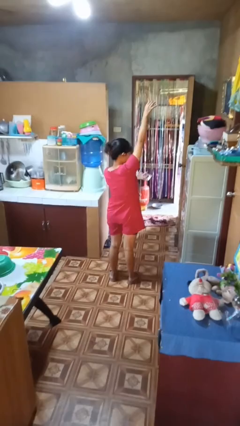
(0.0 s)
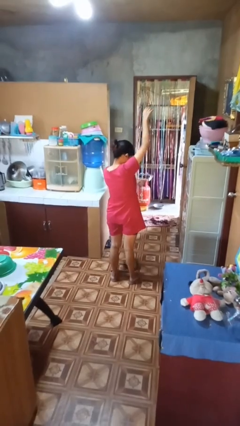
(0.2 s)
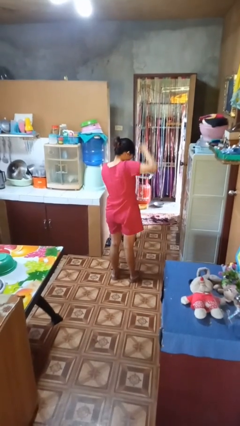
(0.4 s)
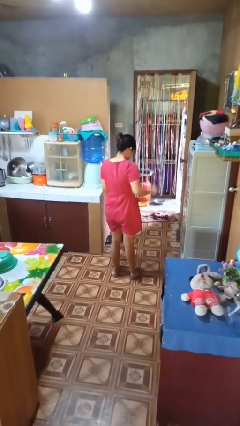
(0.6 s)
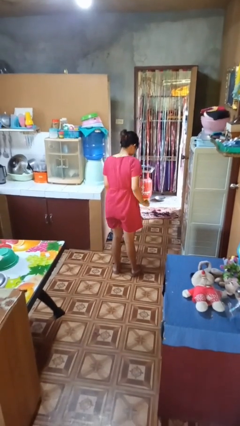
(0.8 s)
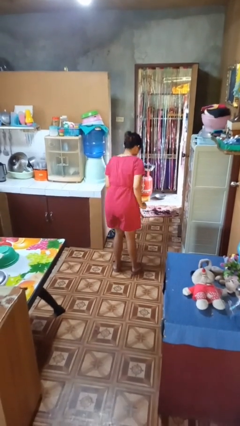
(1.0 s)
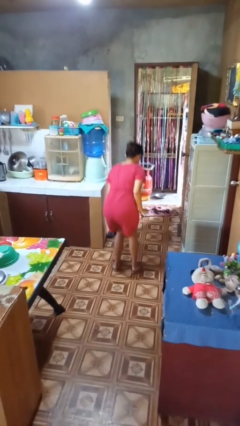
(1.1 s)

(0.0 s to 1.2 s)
person catches dropped object

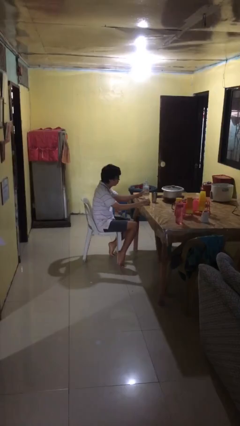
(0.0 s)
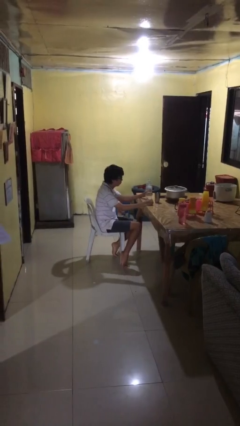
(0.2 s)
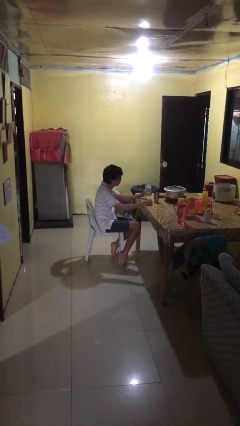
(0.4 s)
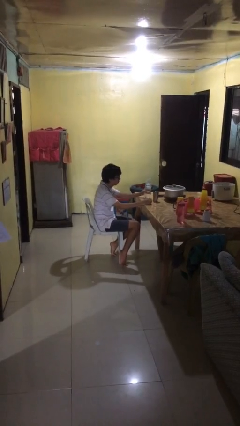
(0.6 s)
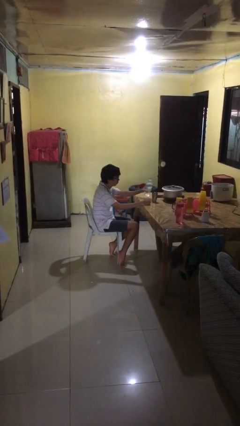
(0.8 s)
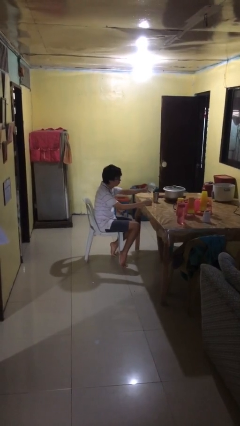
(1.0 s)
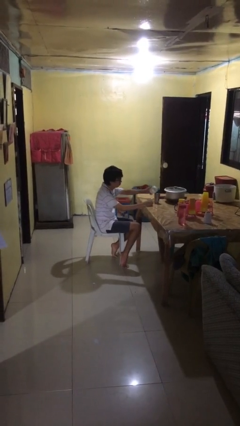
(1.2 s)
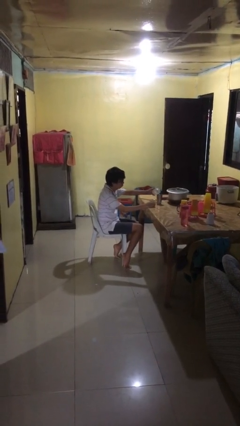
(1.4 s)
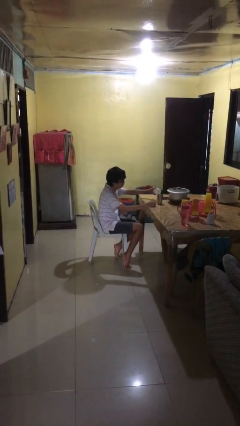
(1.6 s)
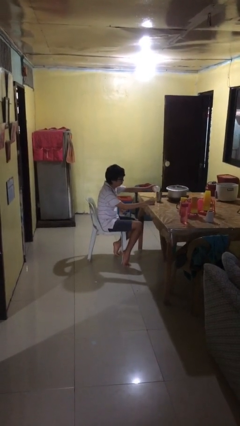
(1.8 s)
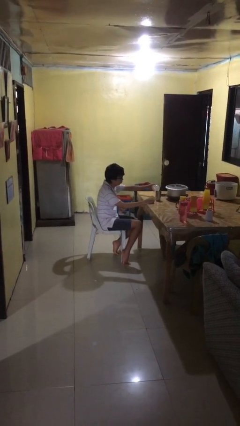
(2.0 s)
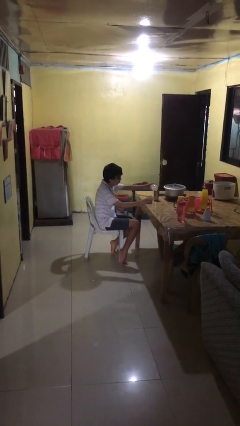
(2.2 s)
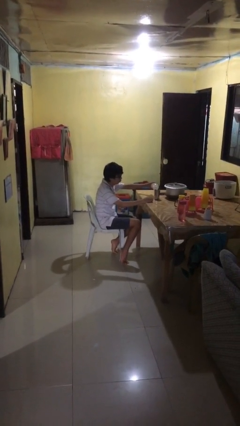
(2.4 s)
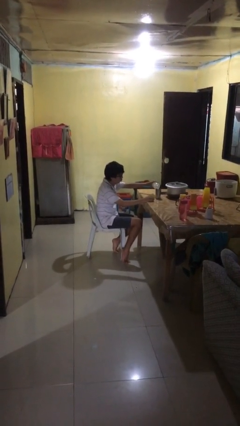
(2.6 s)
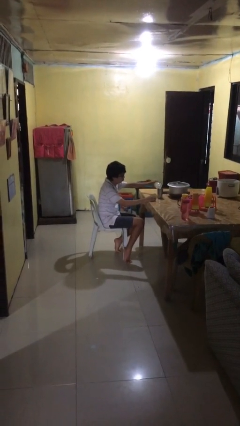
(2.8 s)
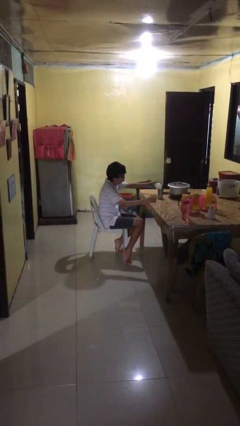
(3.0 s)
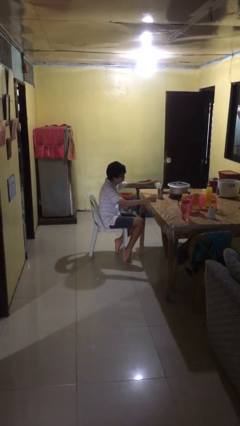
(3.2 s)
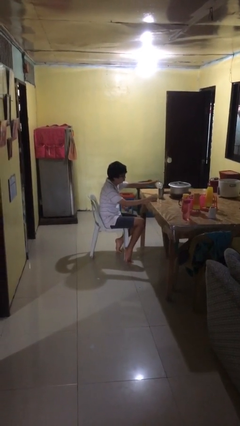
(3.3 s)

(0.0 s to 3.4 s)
person pours liquid into cup

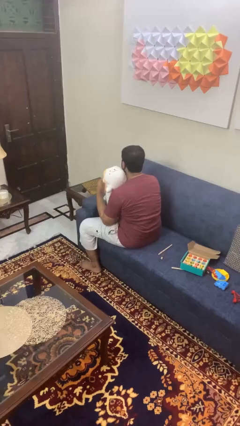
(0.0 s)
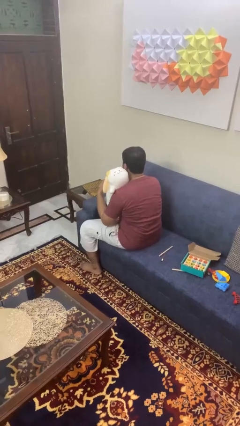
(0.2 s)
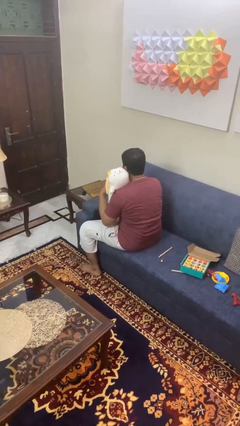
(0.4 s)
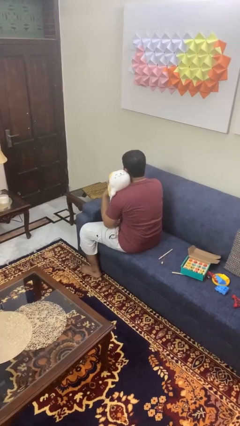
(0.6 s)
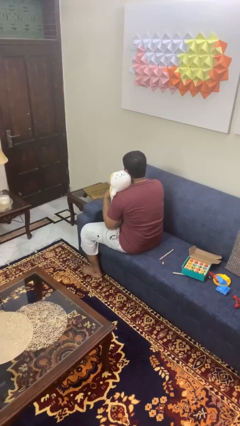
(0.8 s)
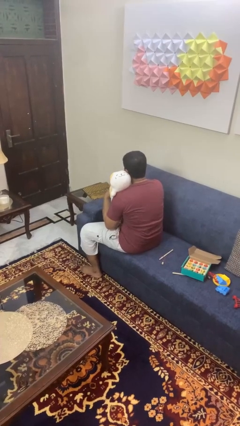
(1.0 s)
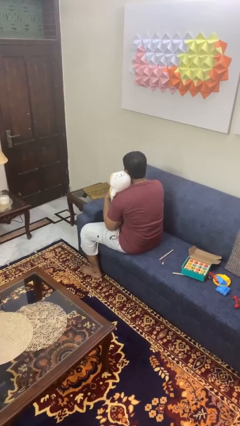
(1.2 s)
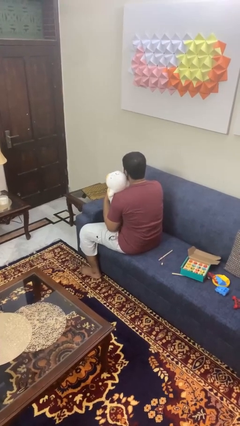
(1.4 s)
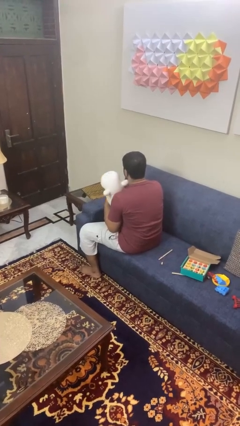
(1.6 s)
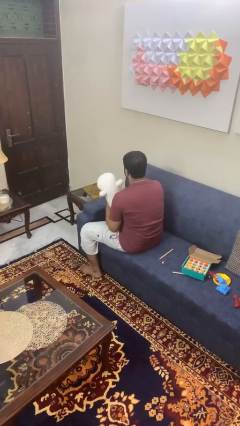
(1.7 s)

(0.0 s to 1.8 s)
person hugs stuffed animal

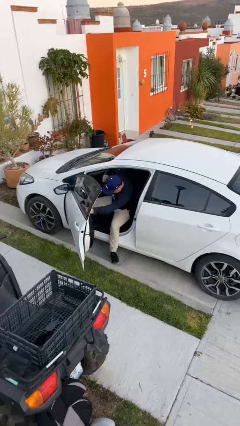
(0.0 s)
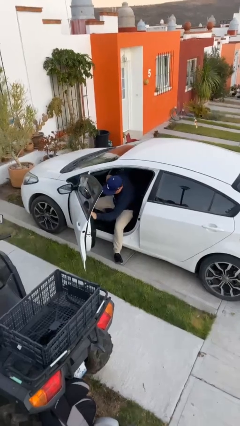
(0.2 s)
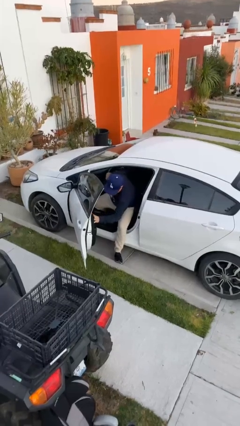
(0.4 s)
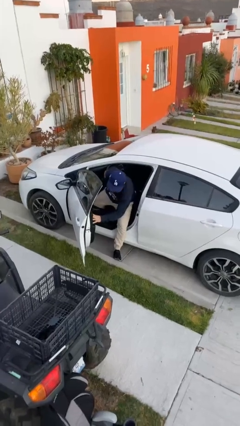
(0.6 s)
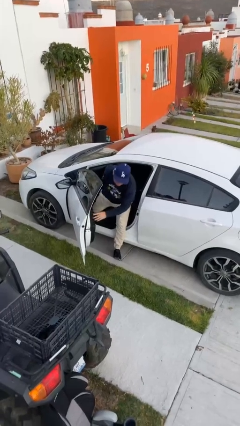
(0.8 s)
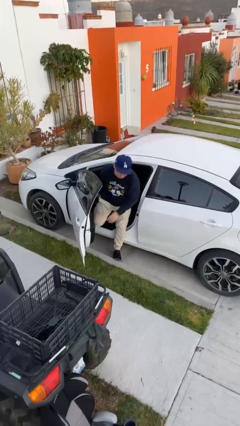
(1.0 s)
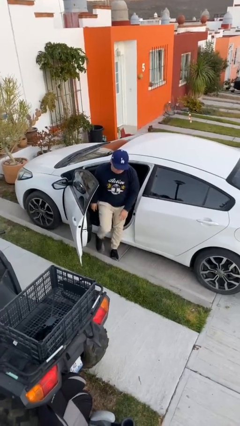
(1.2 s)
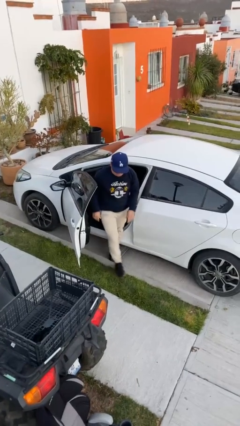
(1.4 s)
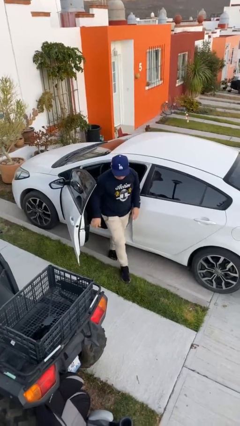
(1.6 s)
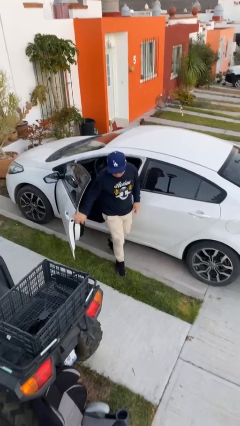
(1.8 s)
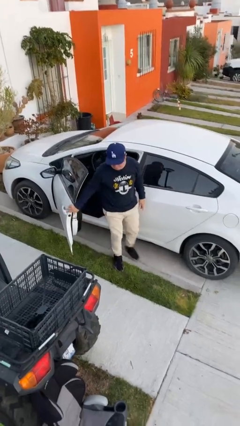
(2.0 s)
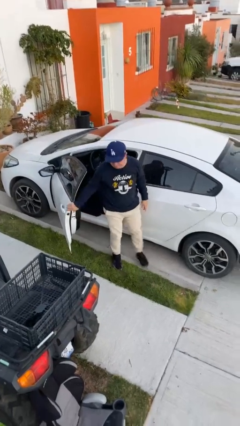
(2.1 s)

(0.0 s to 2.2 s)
person exits car

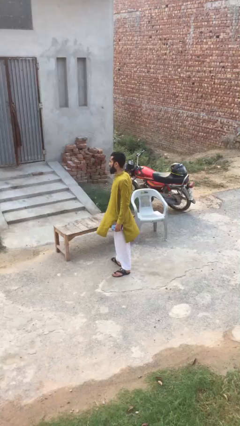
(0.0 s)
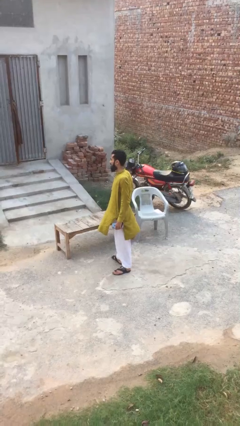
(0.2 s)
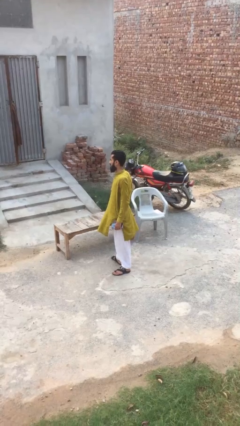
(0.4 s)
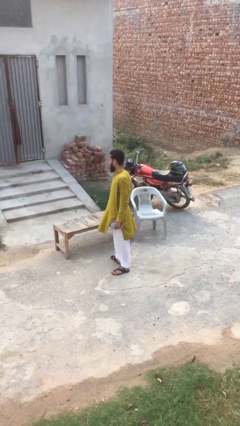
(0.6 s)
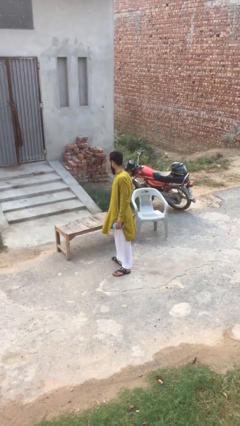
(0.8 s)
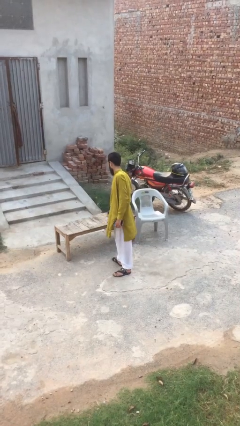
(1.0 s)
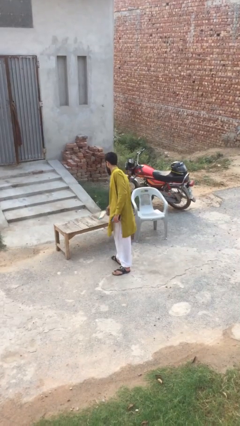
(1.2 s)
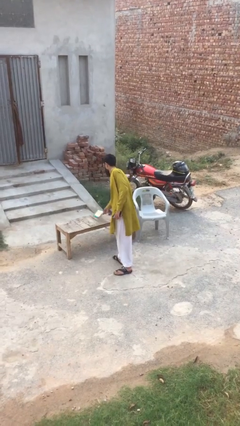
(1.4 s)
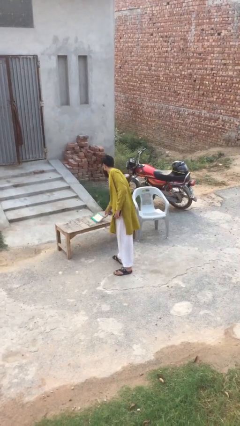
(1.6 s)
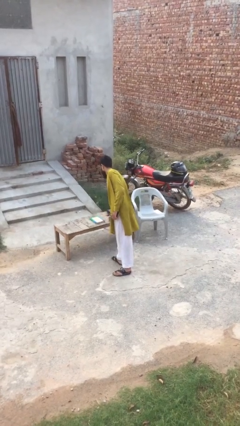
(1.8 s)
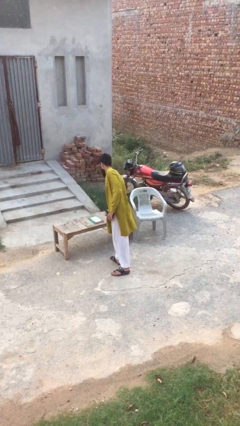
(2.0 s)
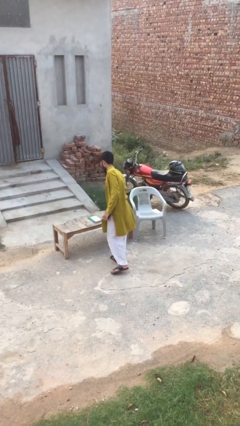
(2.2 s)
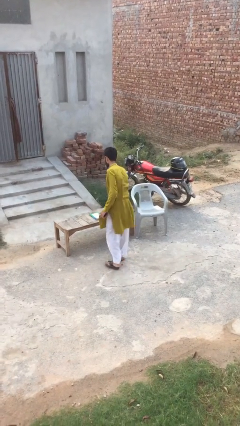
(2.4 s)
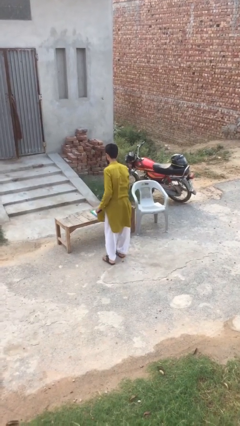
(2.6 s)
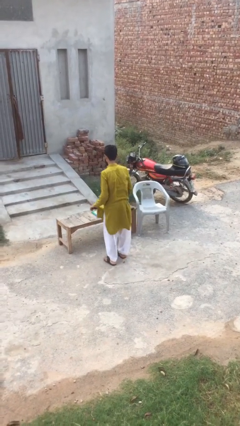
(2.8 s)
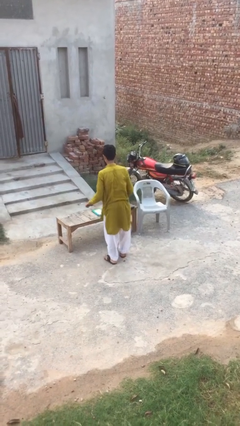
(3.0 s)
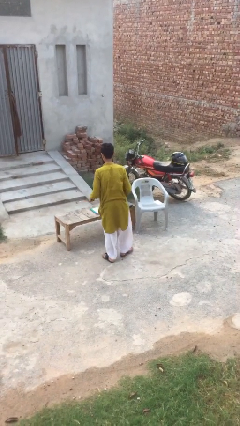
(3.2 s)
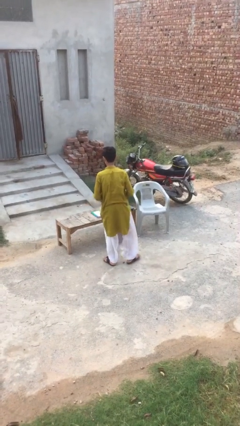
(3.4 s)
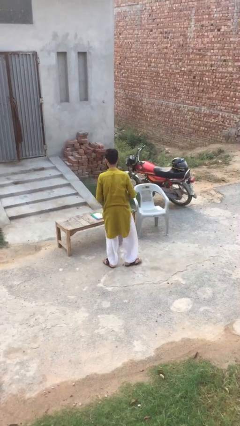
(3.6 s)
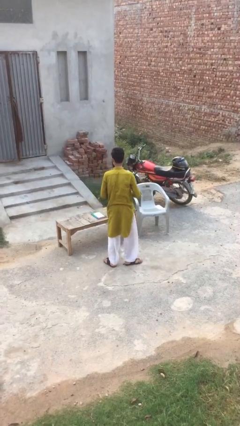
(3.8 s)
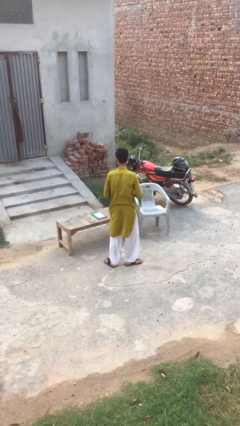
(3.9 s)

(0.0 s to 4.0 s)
person puts down object on table

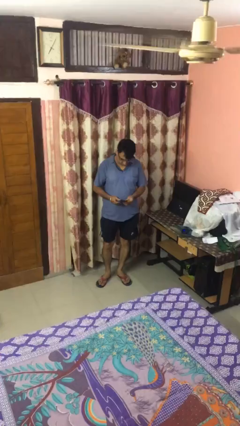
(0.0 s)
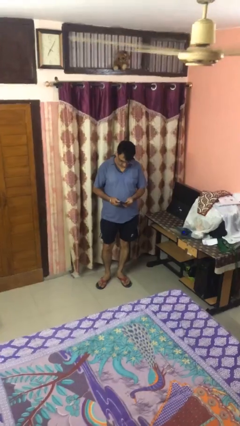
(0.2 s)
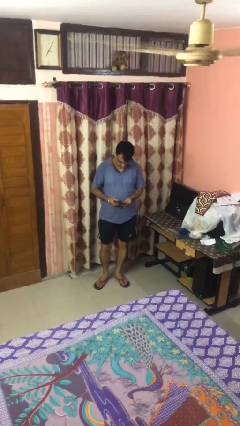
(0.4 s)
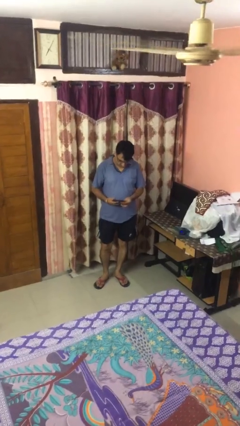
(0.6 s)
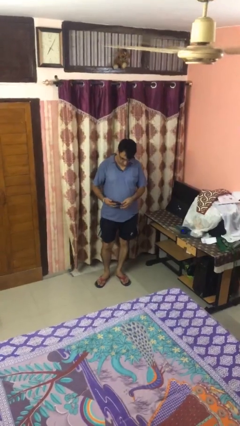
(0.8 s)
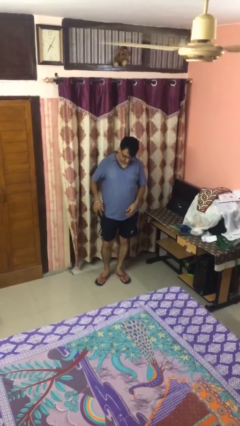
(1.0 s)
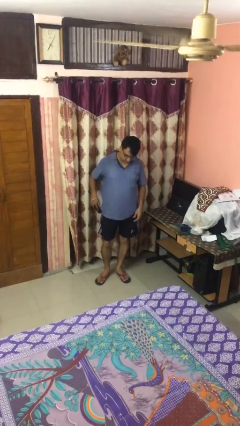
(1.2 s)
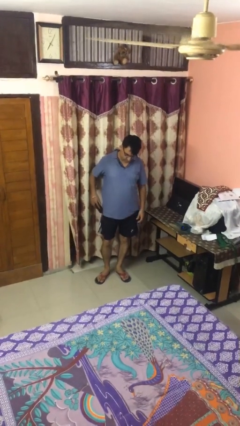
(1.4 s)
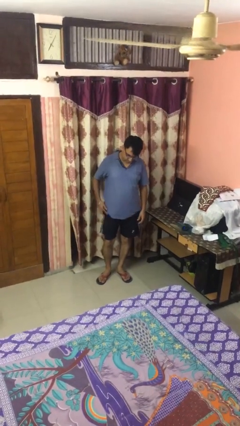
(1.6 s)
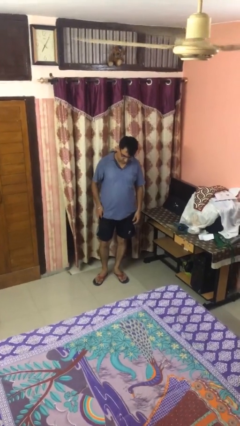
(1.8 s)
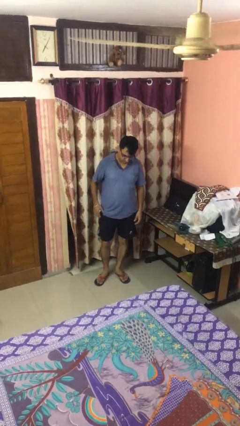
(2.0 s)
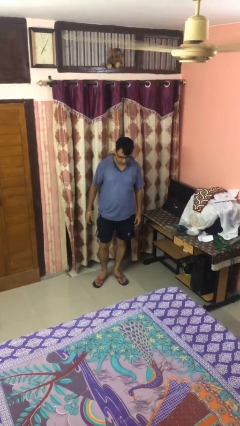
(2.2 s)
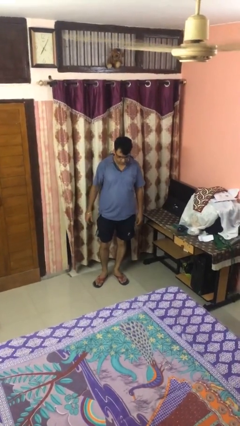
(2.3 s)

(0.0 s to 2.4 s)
person puts phone into pocket

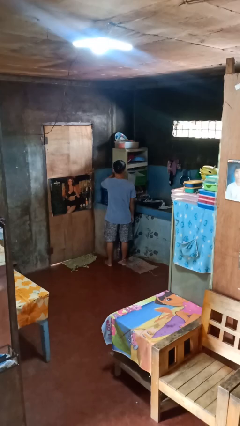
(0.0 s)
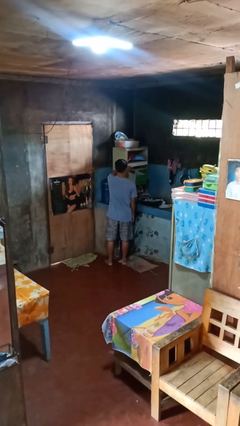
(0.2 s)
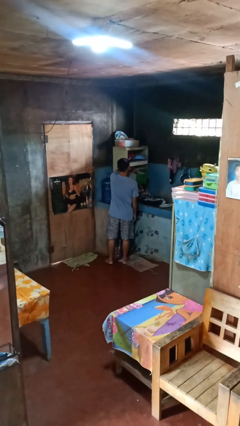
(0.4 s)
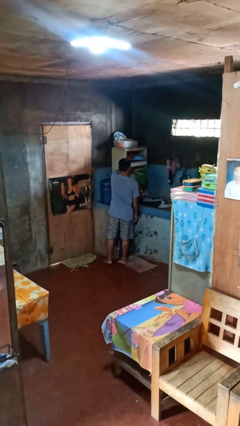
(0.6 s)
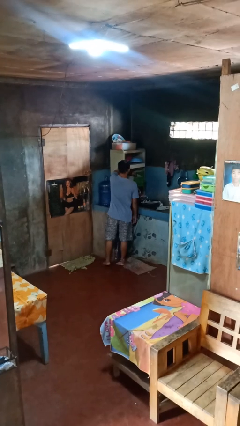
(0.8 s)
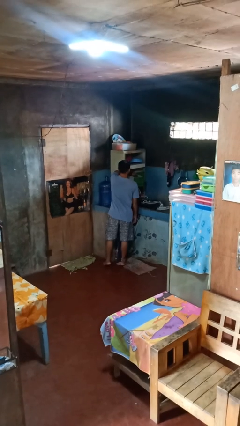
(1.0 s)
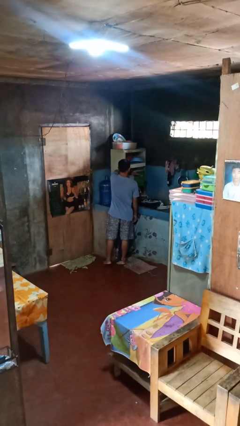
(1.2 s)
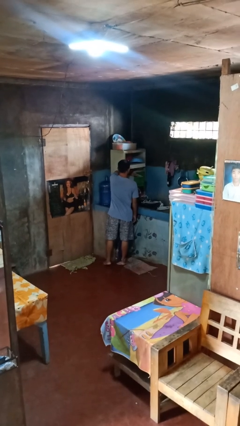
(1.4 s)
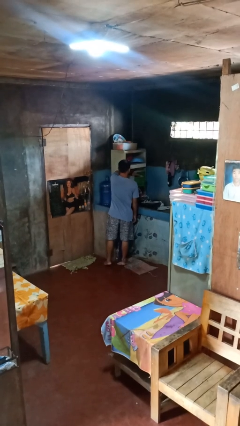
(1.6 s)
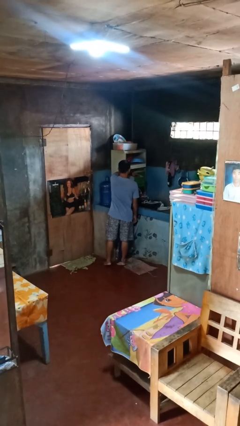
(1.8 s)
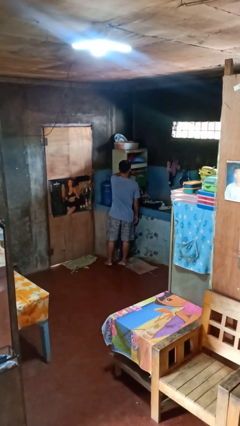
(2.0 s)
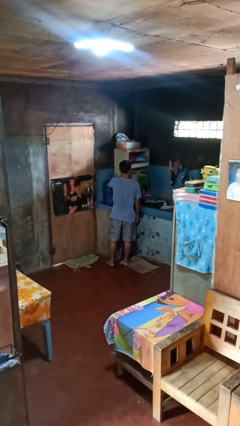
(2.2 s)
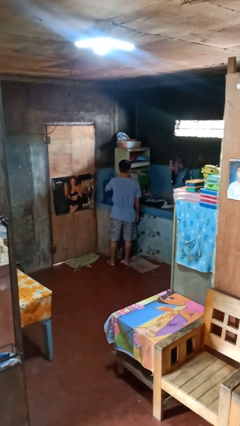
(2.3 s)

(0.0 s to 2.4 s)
person searches in kitchen drawer
